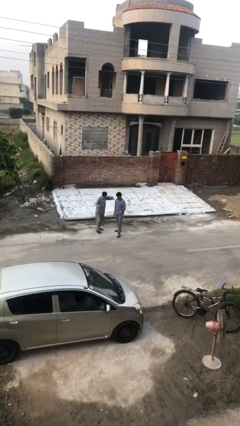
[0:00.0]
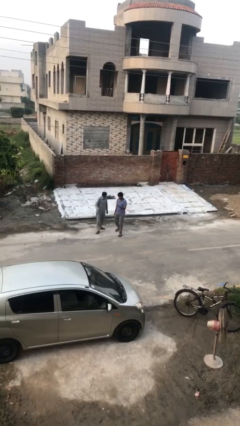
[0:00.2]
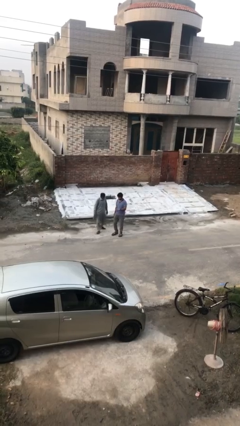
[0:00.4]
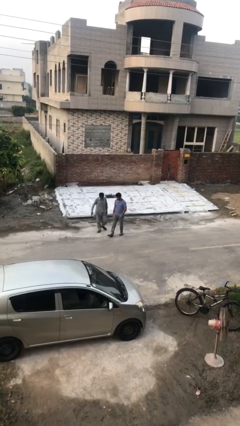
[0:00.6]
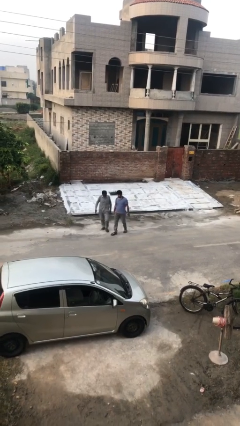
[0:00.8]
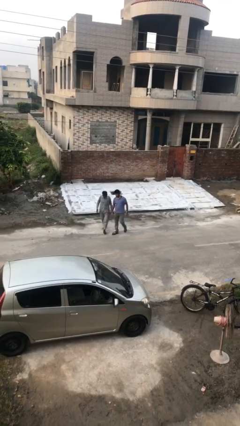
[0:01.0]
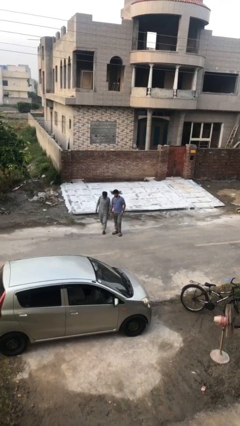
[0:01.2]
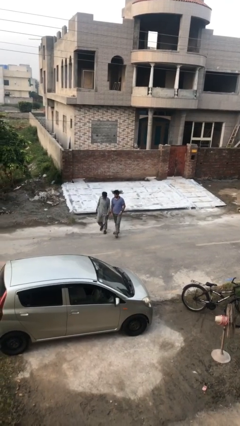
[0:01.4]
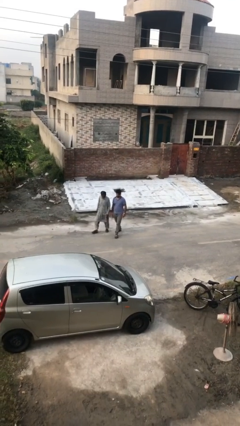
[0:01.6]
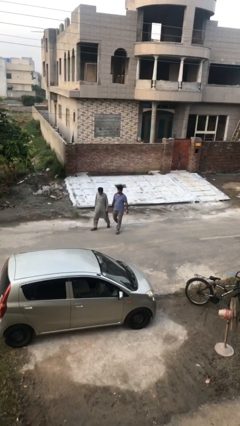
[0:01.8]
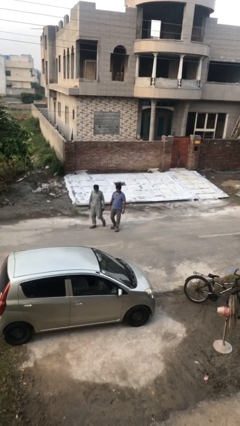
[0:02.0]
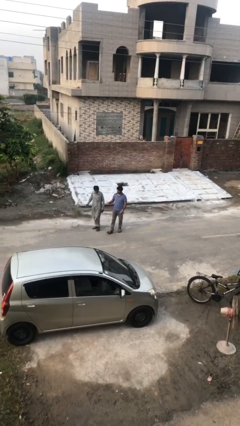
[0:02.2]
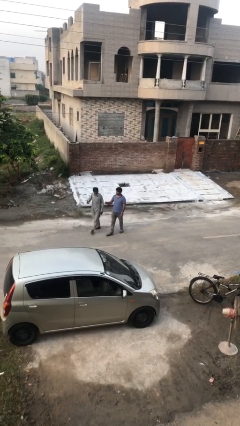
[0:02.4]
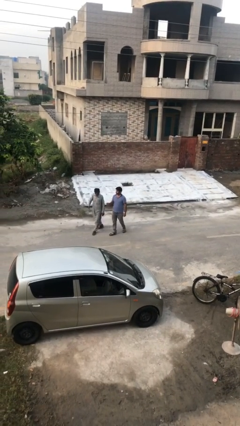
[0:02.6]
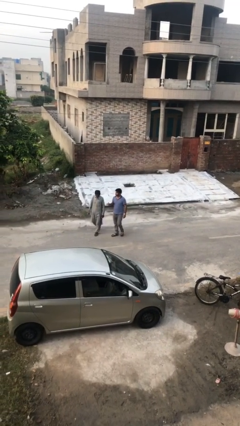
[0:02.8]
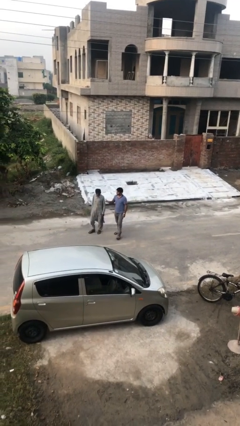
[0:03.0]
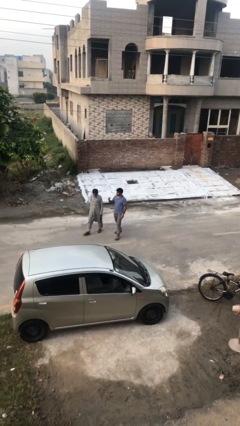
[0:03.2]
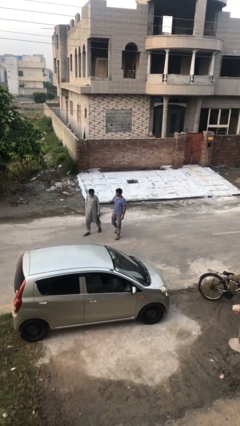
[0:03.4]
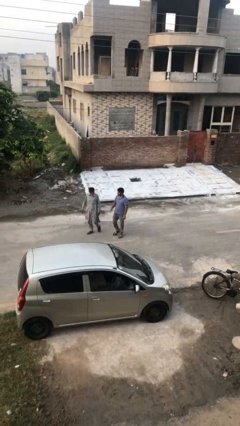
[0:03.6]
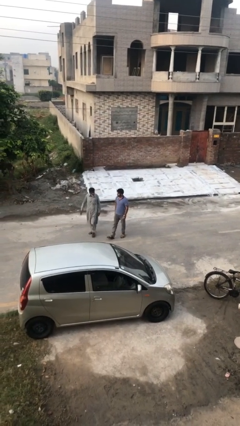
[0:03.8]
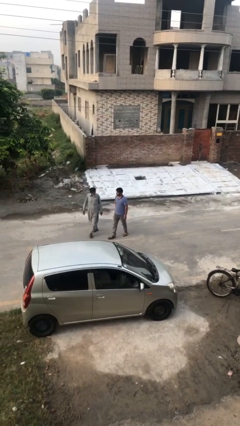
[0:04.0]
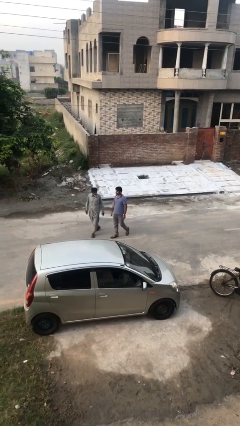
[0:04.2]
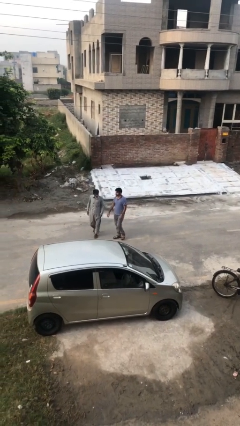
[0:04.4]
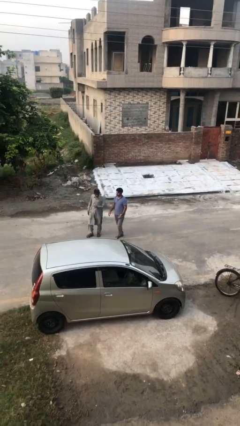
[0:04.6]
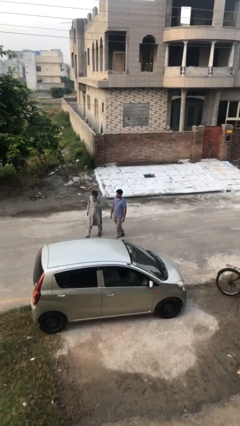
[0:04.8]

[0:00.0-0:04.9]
person talks to person

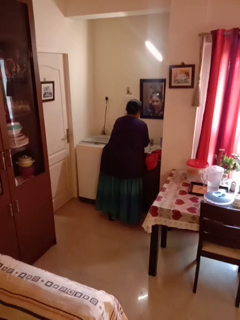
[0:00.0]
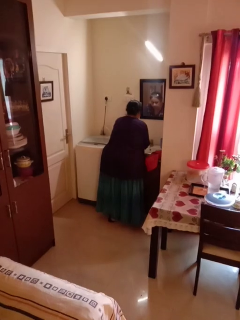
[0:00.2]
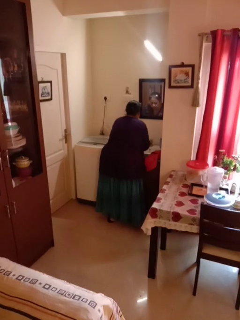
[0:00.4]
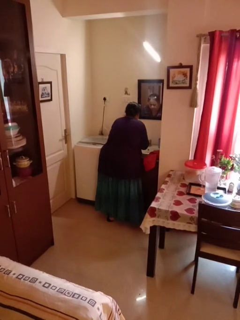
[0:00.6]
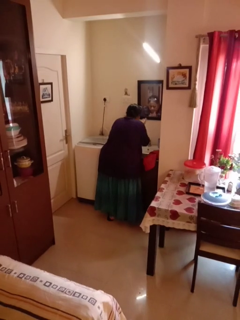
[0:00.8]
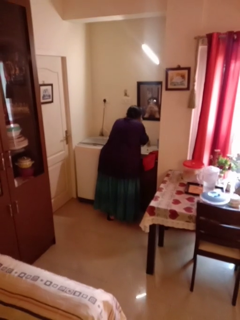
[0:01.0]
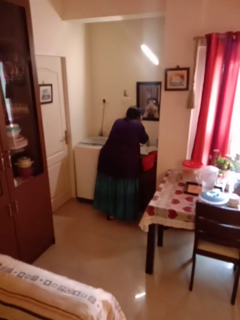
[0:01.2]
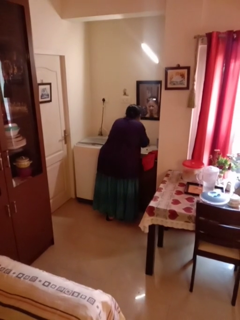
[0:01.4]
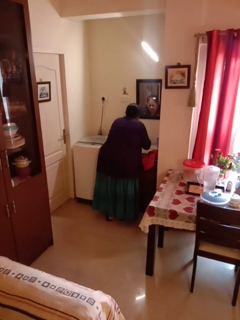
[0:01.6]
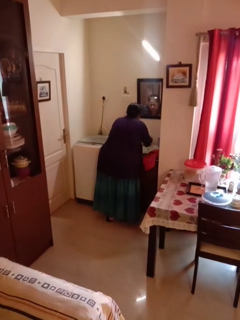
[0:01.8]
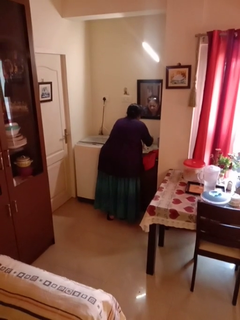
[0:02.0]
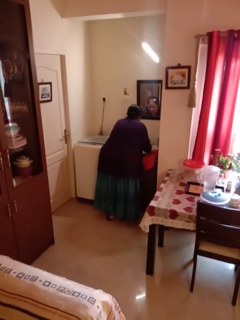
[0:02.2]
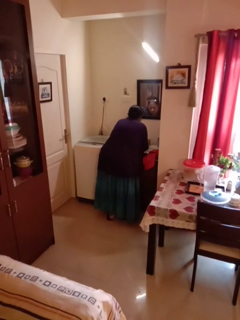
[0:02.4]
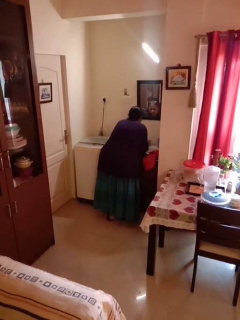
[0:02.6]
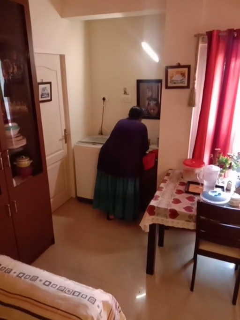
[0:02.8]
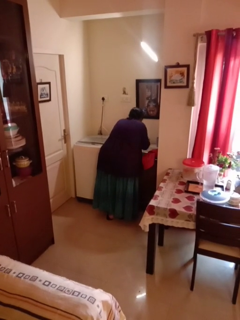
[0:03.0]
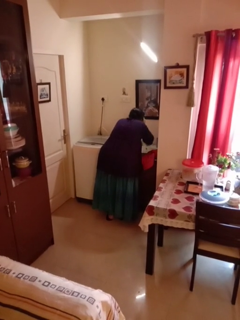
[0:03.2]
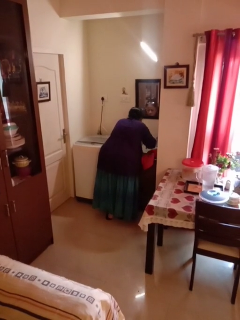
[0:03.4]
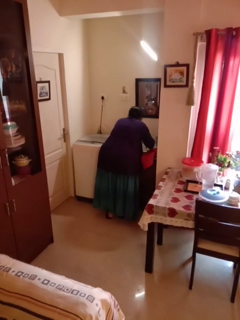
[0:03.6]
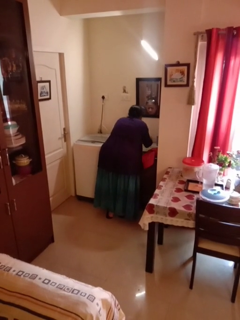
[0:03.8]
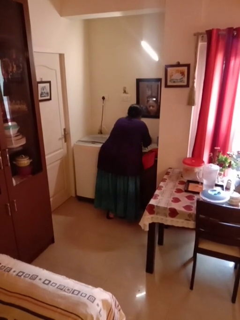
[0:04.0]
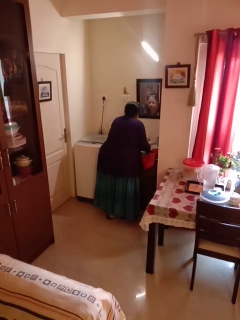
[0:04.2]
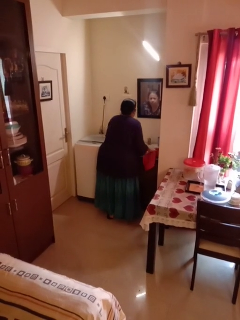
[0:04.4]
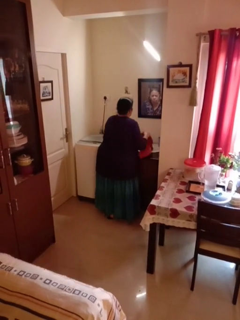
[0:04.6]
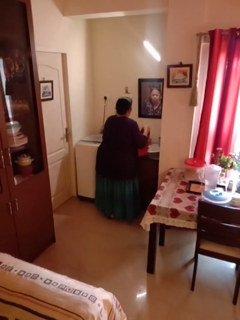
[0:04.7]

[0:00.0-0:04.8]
person washes face

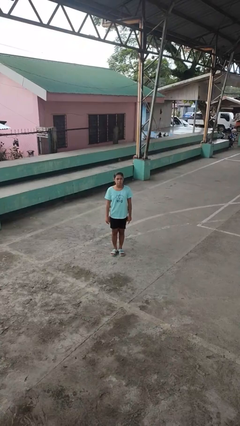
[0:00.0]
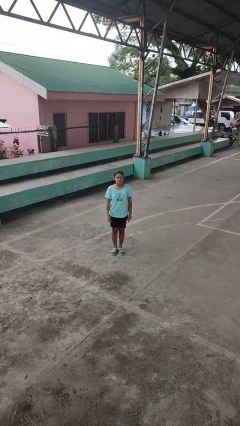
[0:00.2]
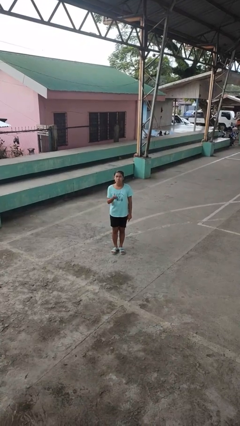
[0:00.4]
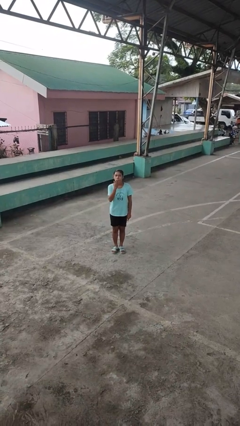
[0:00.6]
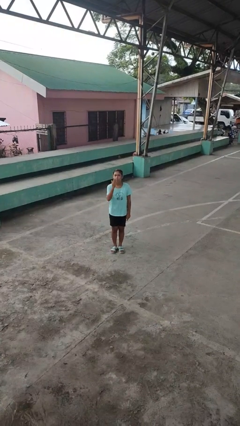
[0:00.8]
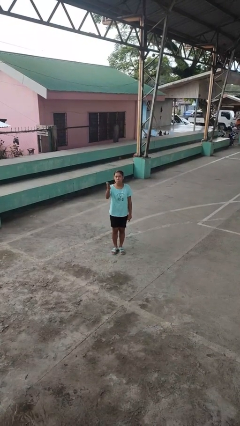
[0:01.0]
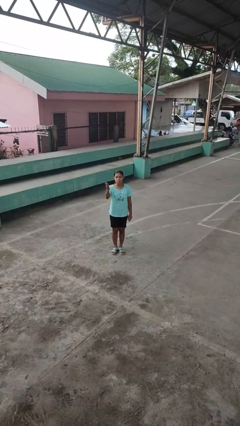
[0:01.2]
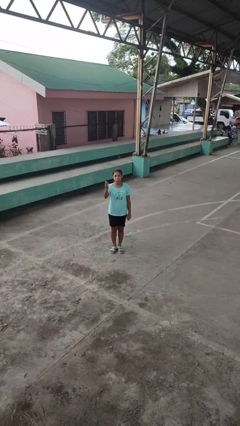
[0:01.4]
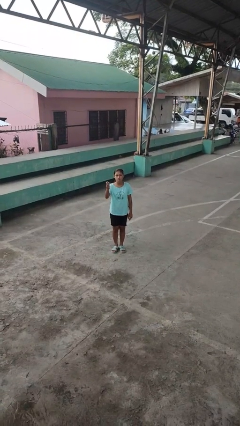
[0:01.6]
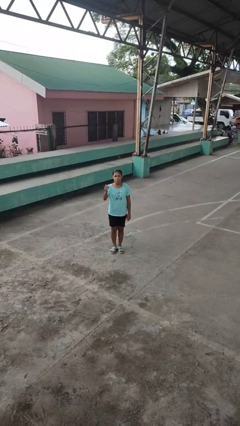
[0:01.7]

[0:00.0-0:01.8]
person gestures blow kiss

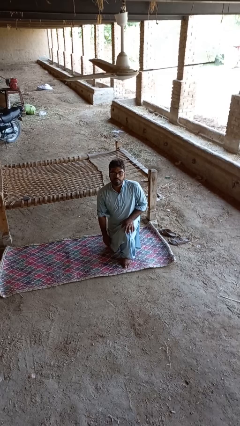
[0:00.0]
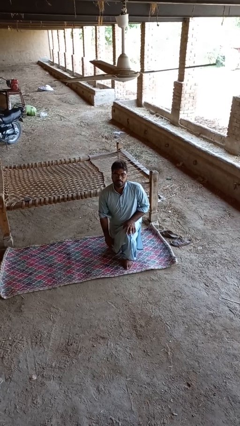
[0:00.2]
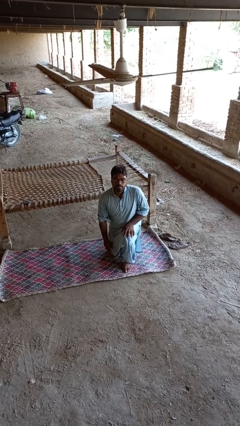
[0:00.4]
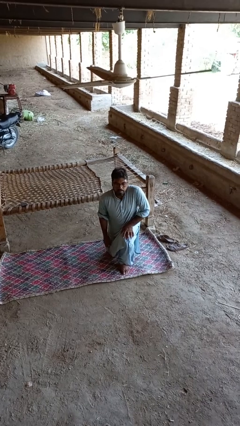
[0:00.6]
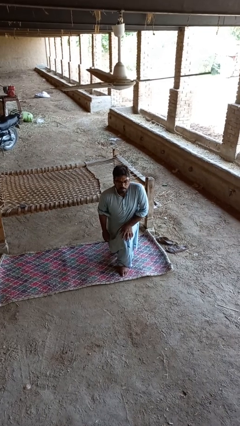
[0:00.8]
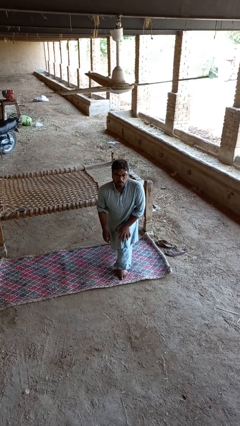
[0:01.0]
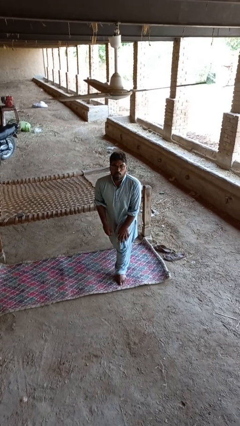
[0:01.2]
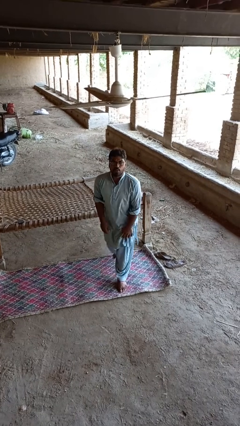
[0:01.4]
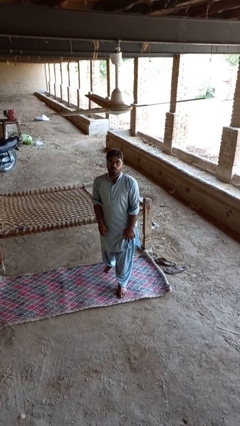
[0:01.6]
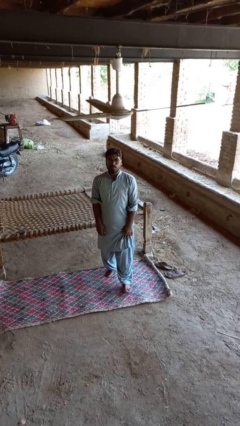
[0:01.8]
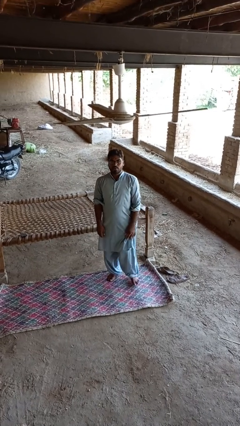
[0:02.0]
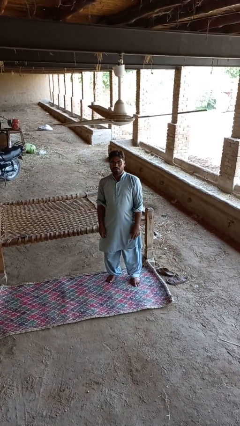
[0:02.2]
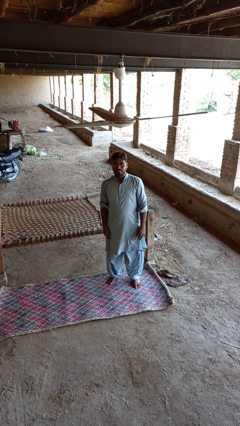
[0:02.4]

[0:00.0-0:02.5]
person stands up from floor

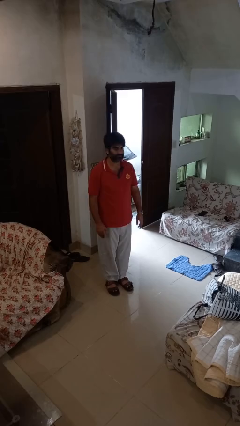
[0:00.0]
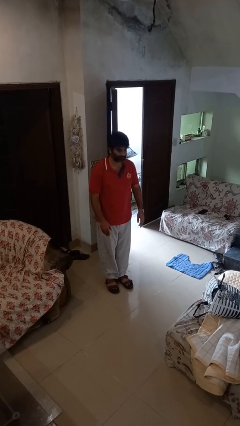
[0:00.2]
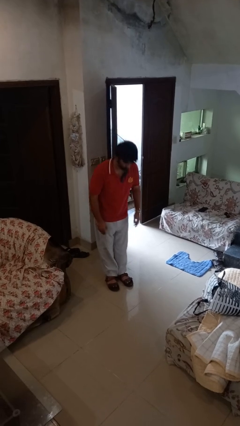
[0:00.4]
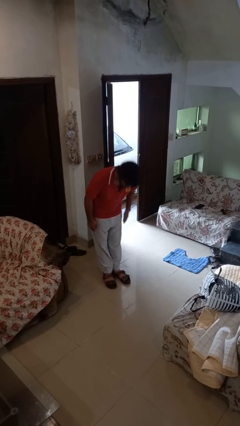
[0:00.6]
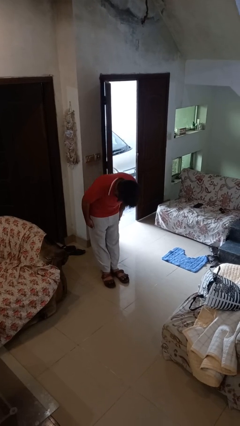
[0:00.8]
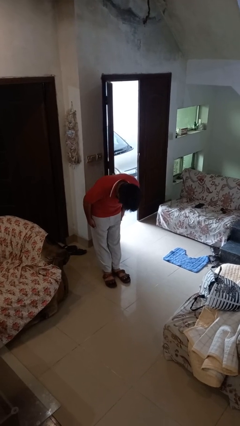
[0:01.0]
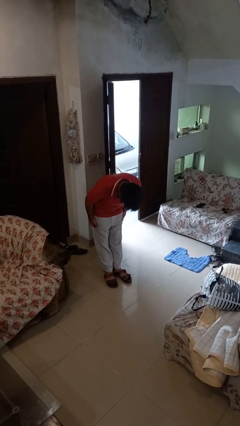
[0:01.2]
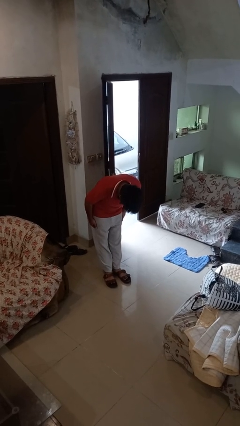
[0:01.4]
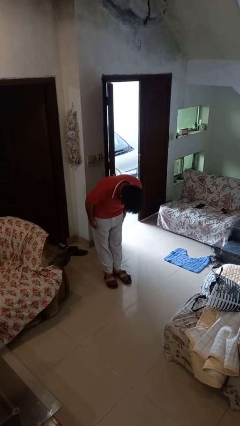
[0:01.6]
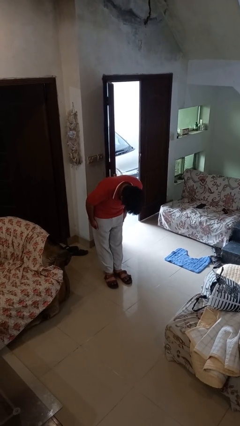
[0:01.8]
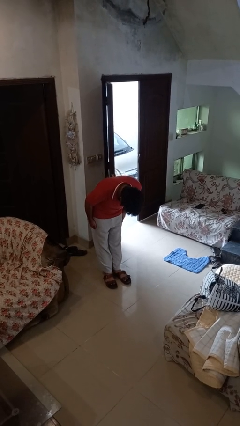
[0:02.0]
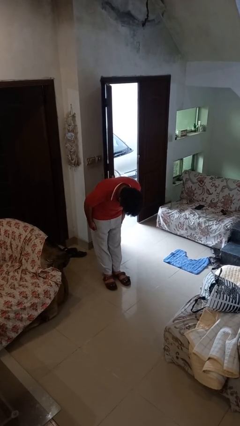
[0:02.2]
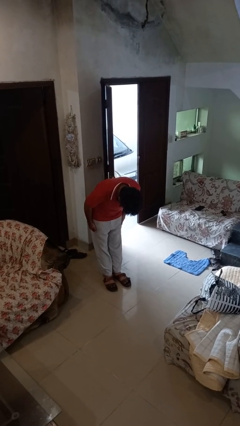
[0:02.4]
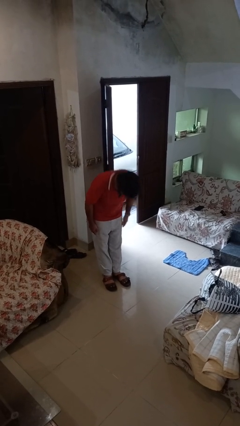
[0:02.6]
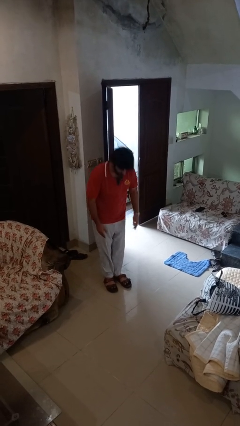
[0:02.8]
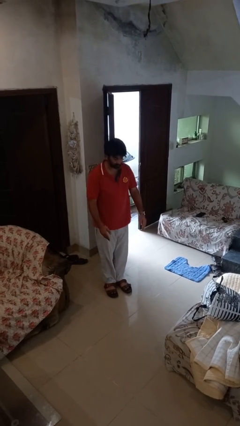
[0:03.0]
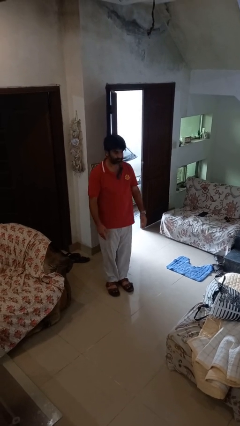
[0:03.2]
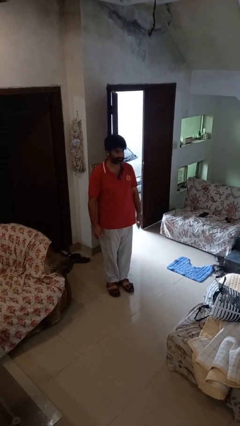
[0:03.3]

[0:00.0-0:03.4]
person bows

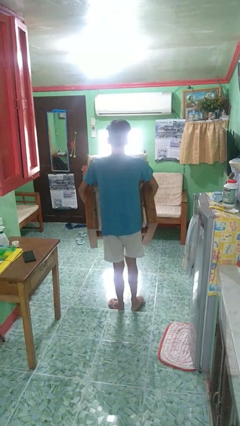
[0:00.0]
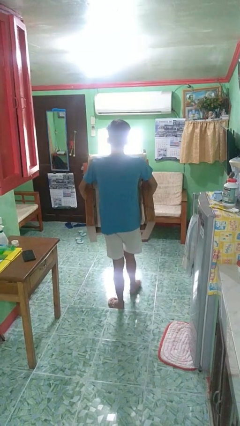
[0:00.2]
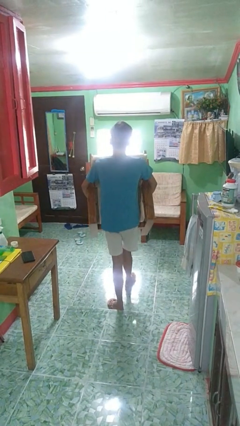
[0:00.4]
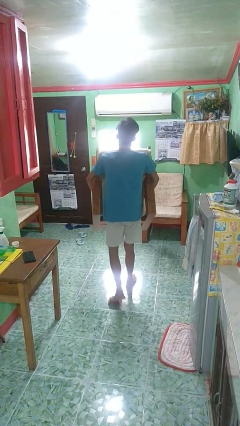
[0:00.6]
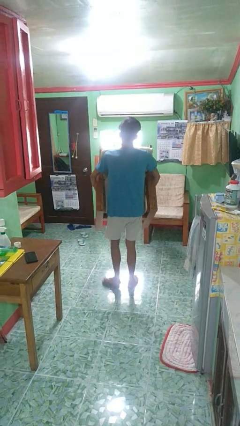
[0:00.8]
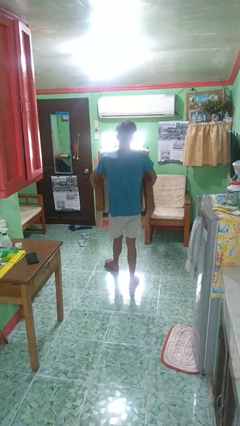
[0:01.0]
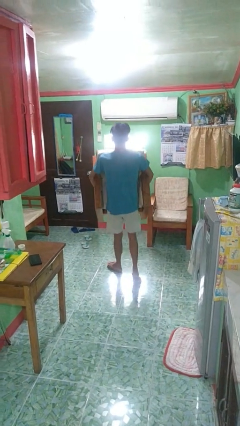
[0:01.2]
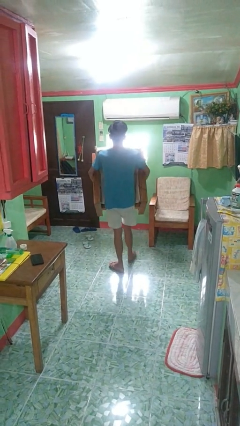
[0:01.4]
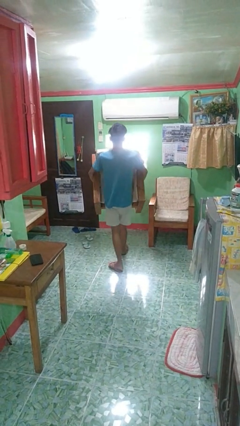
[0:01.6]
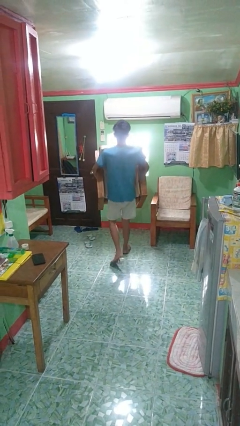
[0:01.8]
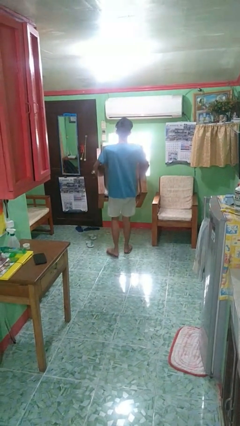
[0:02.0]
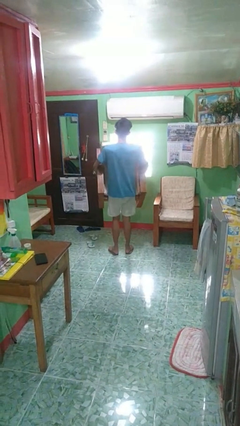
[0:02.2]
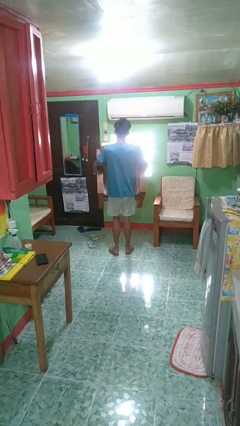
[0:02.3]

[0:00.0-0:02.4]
person carries furniture
